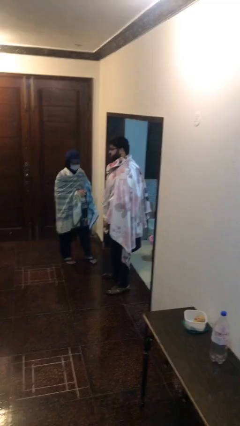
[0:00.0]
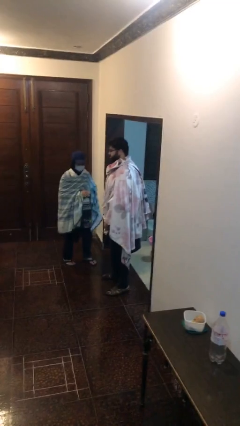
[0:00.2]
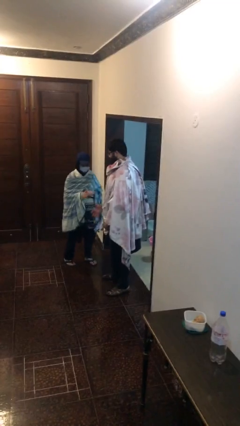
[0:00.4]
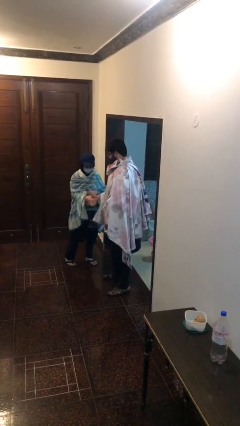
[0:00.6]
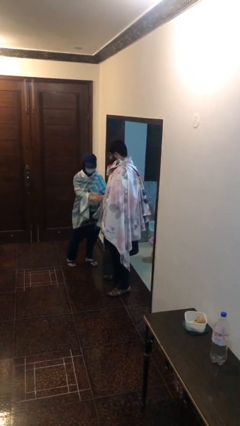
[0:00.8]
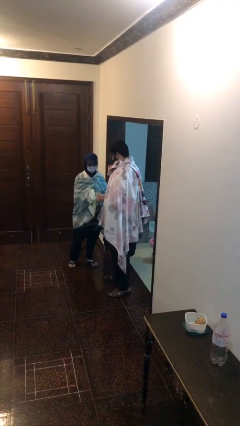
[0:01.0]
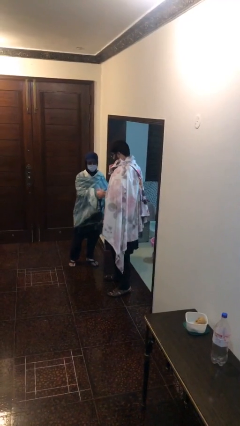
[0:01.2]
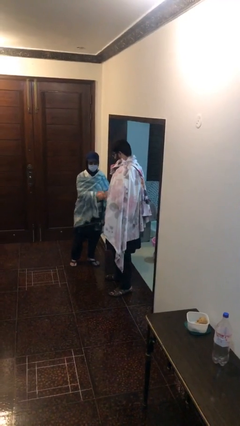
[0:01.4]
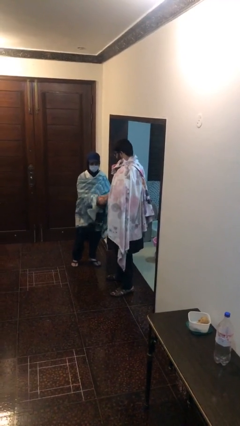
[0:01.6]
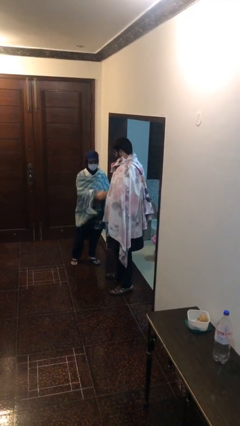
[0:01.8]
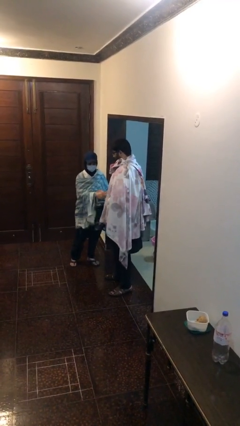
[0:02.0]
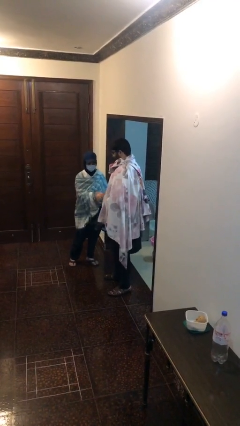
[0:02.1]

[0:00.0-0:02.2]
person shakes hand

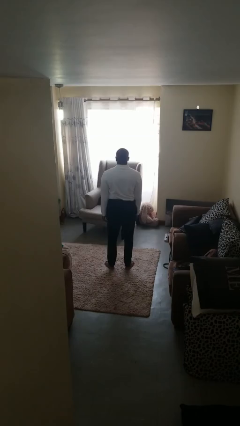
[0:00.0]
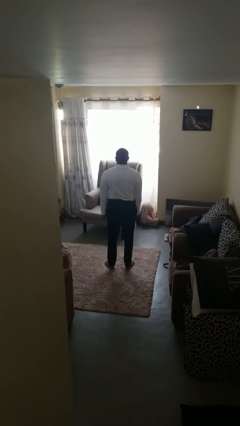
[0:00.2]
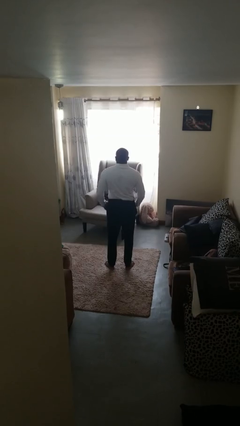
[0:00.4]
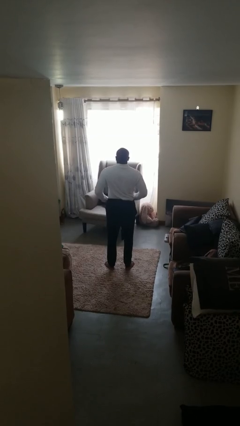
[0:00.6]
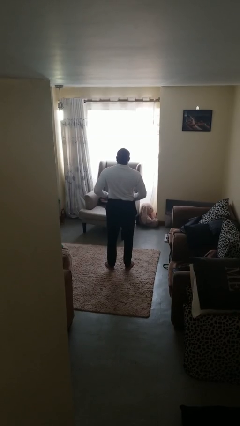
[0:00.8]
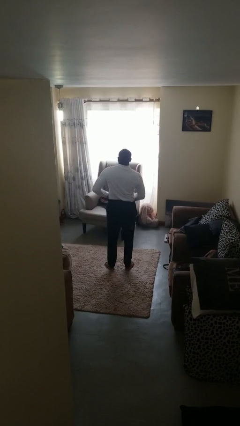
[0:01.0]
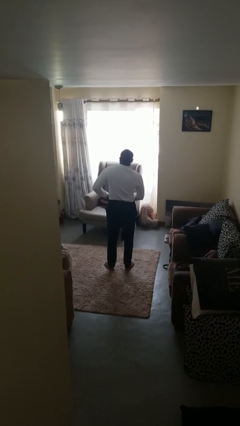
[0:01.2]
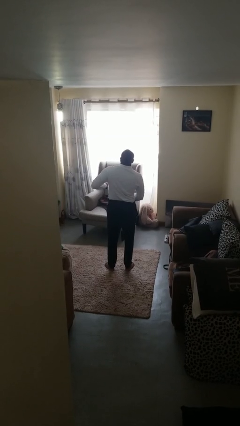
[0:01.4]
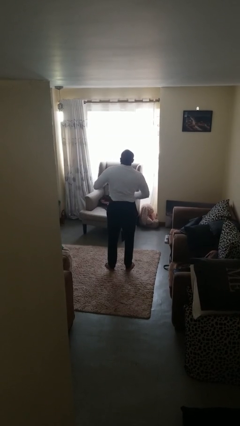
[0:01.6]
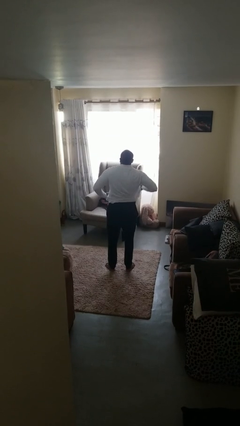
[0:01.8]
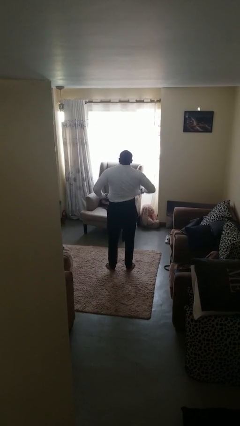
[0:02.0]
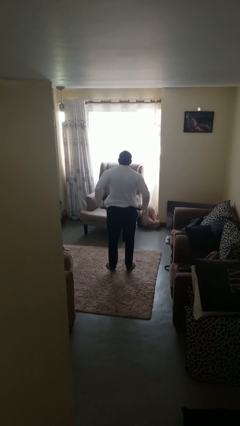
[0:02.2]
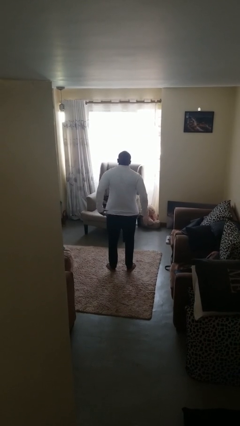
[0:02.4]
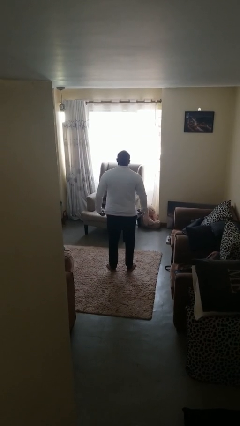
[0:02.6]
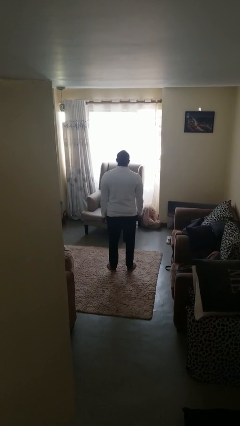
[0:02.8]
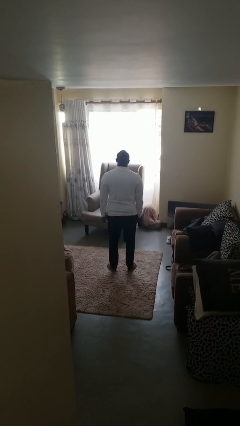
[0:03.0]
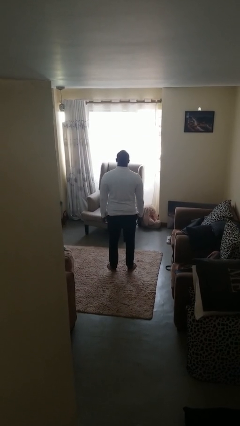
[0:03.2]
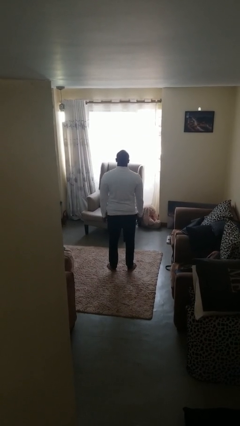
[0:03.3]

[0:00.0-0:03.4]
person untucks shirt

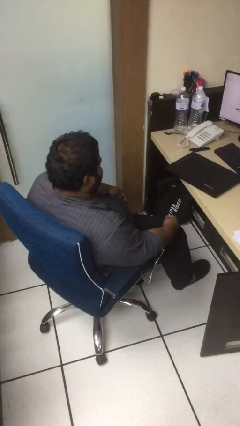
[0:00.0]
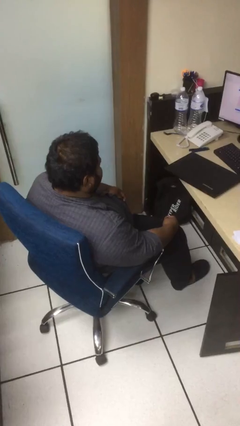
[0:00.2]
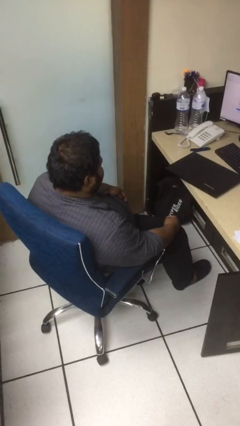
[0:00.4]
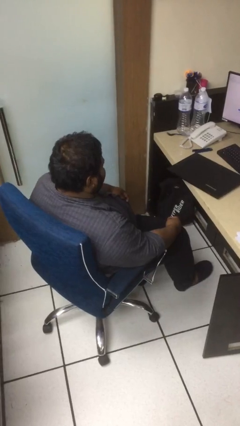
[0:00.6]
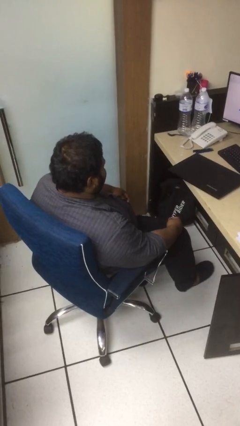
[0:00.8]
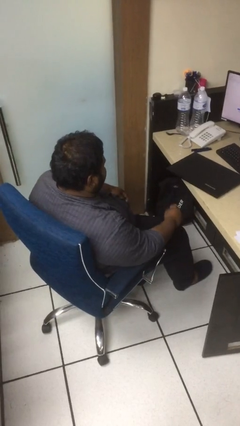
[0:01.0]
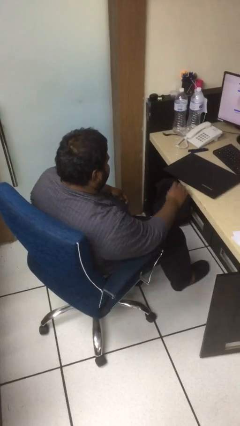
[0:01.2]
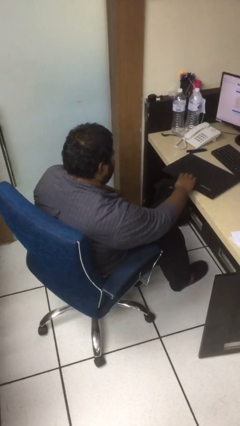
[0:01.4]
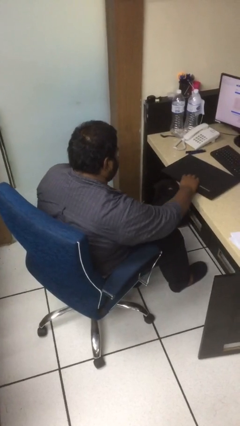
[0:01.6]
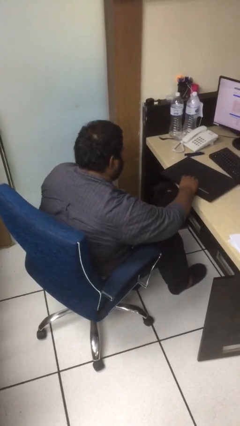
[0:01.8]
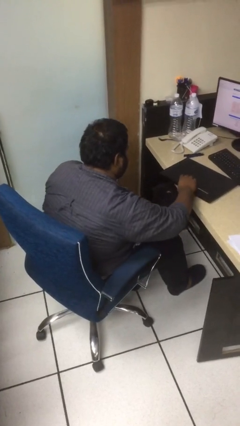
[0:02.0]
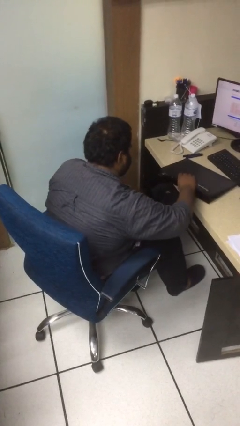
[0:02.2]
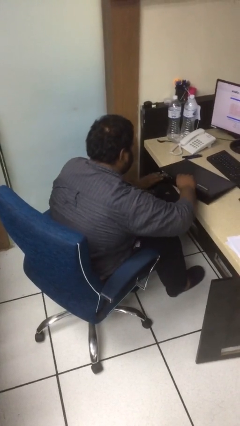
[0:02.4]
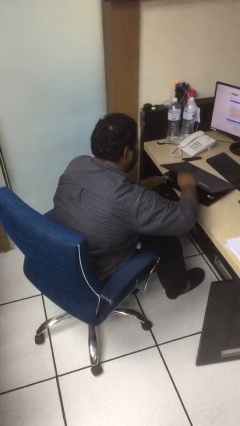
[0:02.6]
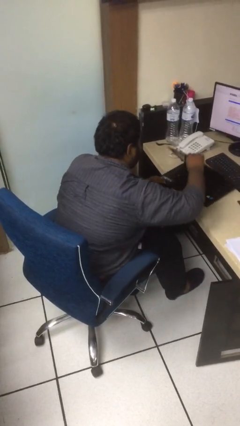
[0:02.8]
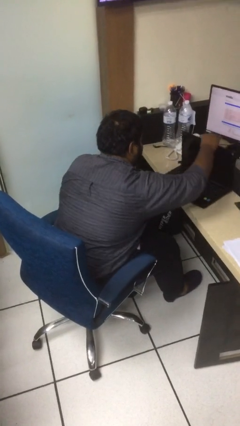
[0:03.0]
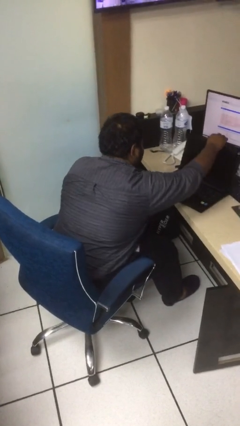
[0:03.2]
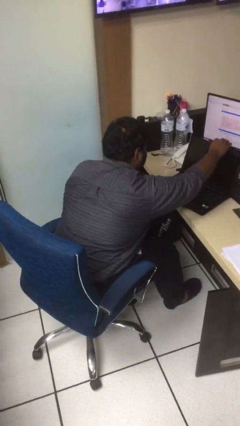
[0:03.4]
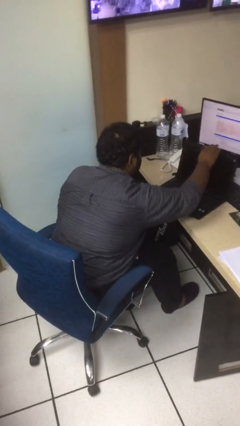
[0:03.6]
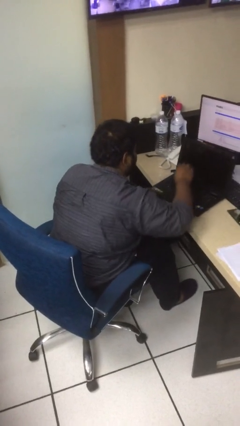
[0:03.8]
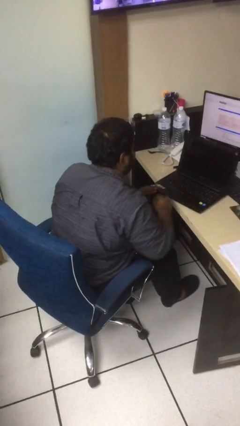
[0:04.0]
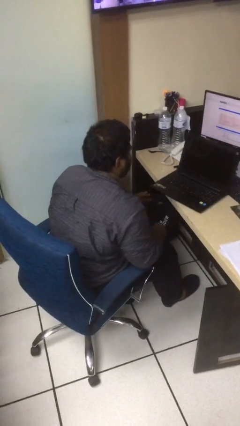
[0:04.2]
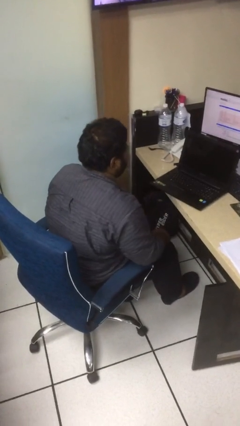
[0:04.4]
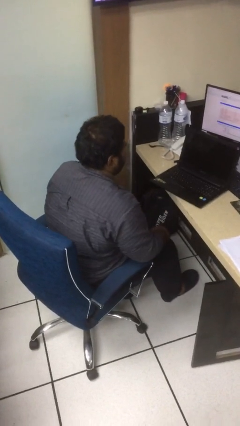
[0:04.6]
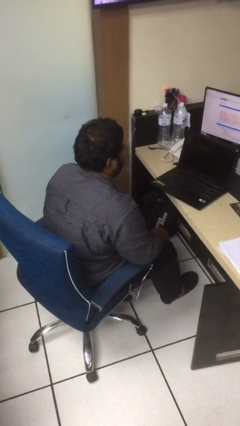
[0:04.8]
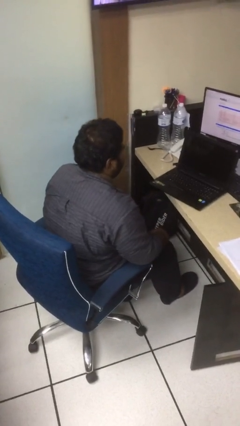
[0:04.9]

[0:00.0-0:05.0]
person opens laptop

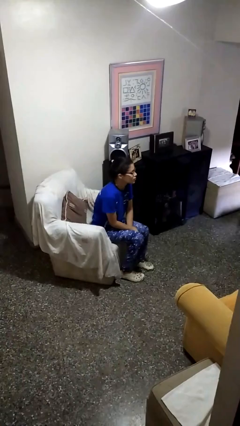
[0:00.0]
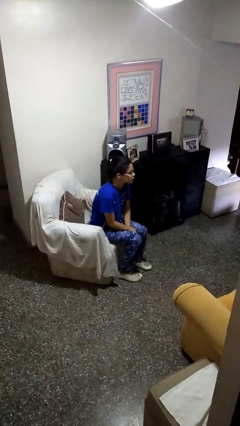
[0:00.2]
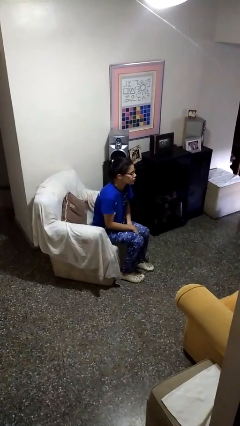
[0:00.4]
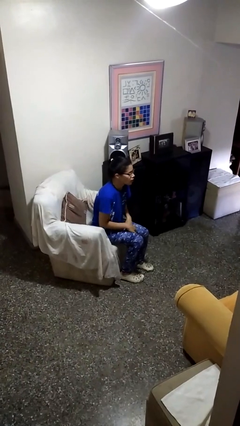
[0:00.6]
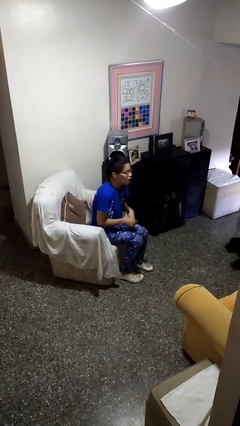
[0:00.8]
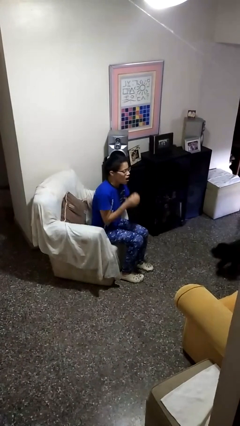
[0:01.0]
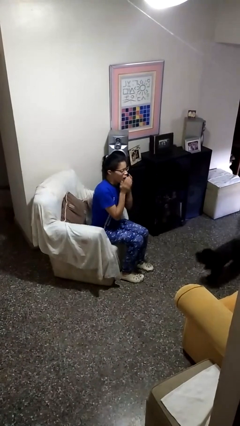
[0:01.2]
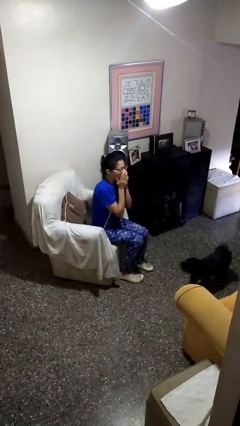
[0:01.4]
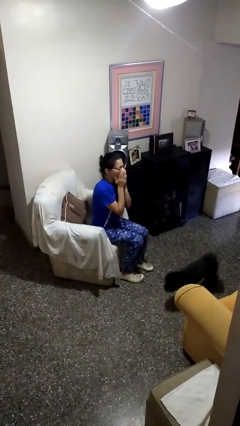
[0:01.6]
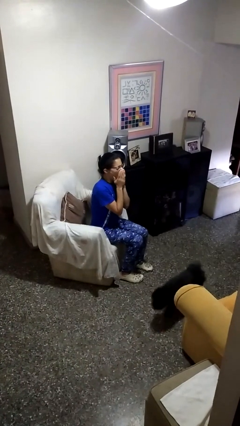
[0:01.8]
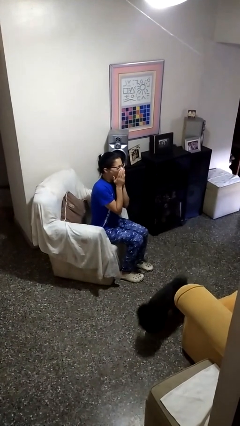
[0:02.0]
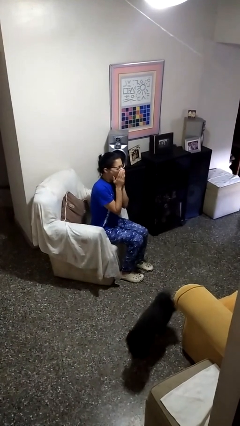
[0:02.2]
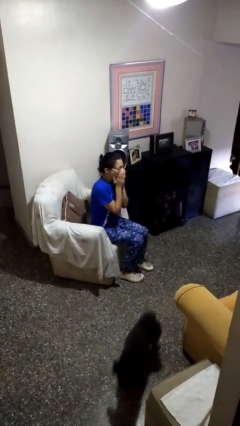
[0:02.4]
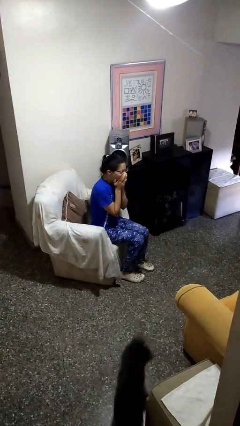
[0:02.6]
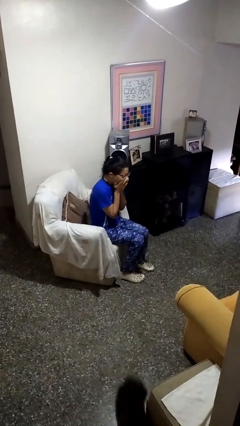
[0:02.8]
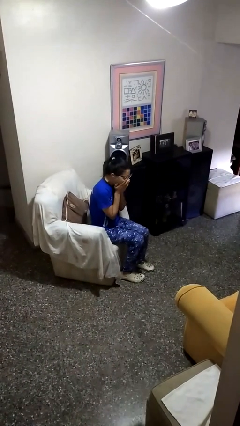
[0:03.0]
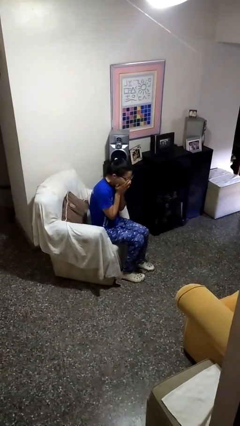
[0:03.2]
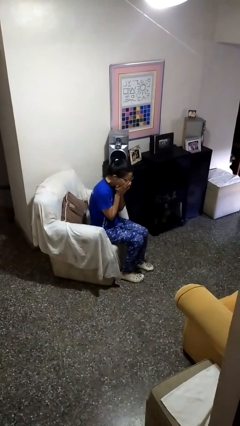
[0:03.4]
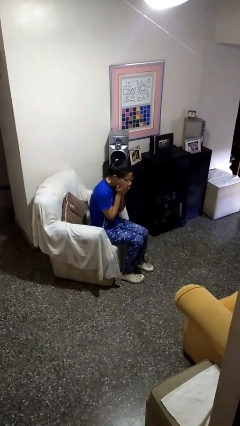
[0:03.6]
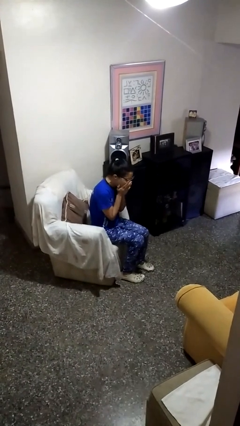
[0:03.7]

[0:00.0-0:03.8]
person yawns

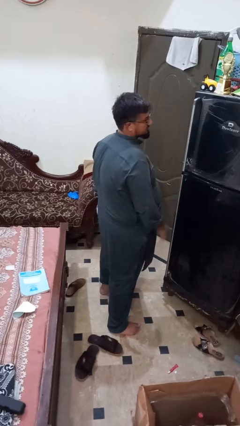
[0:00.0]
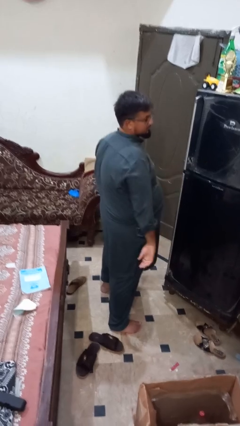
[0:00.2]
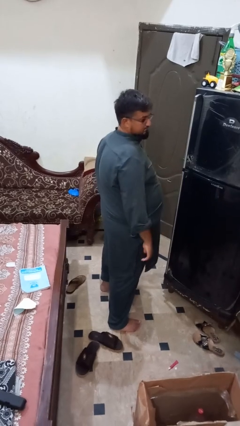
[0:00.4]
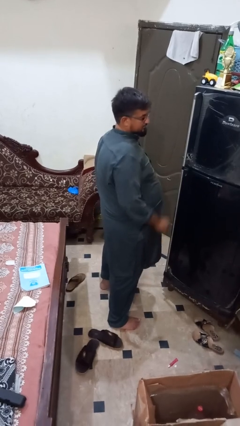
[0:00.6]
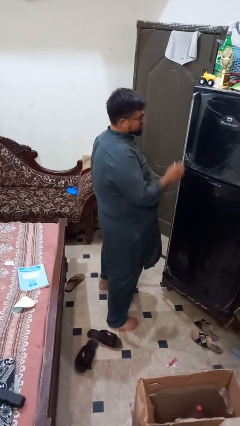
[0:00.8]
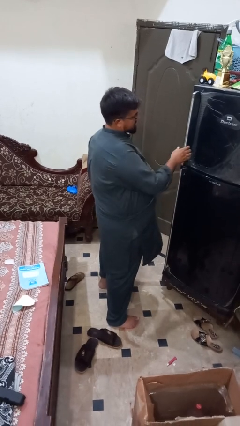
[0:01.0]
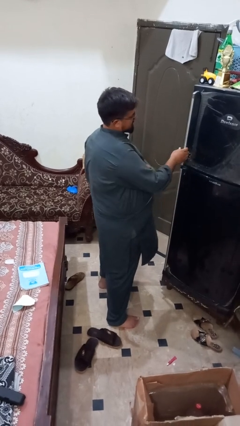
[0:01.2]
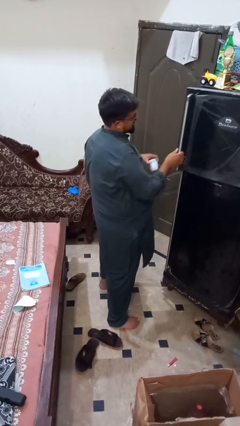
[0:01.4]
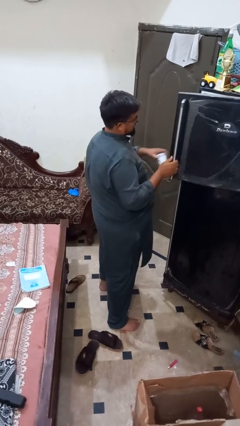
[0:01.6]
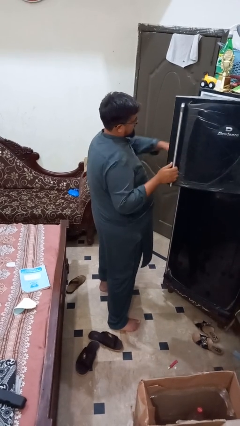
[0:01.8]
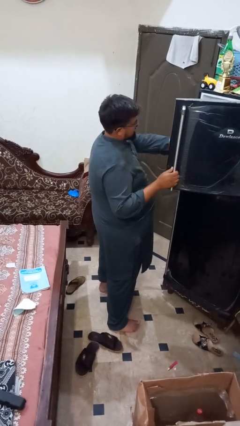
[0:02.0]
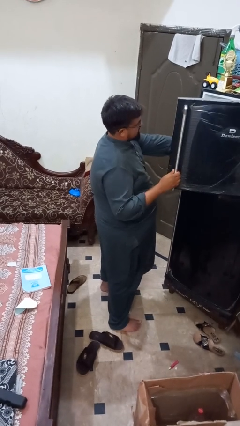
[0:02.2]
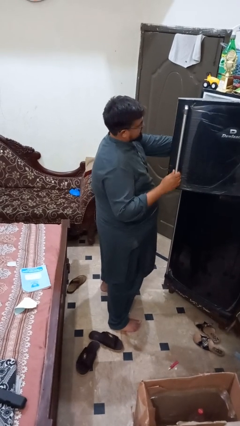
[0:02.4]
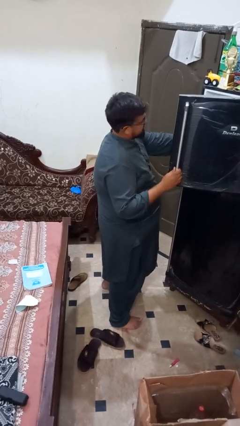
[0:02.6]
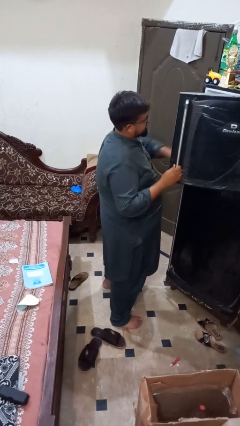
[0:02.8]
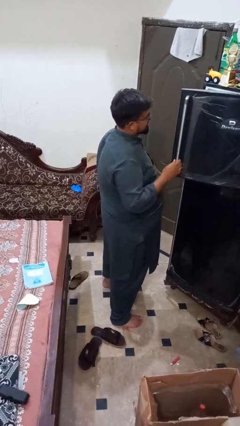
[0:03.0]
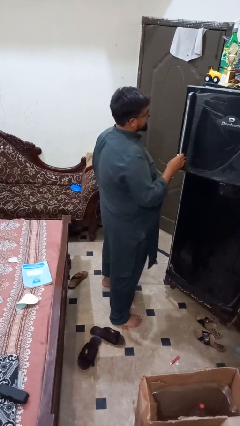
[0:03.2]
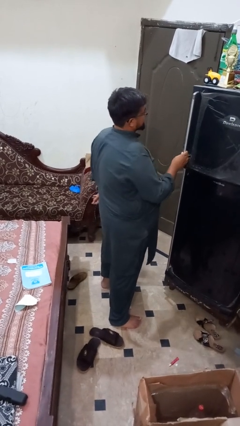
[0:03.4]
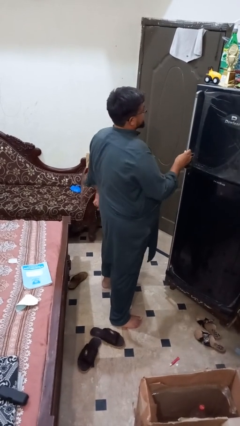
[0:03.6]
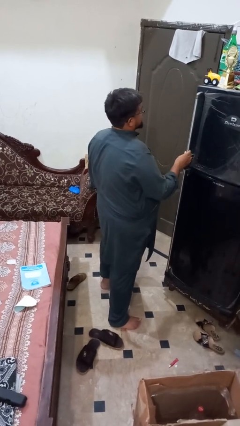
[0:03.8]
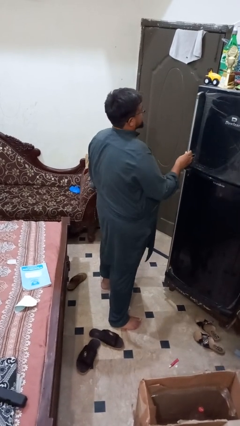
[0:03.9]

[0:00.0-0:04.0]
person puts object into refrigerator
